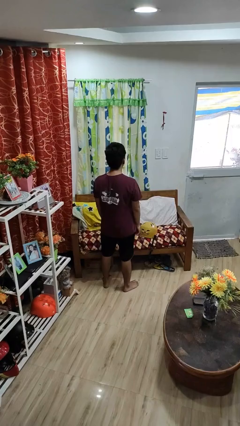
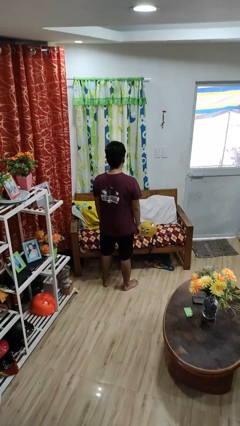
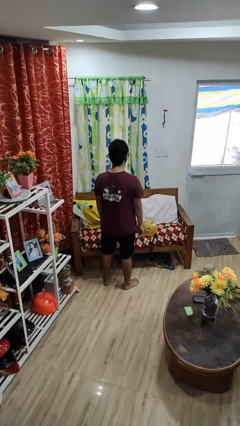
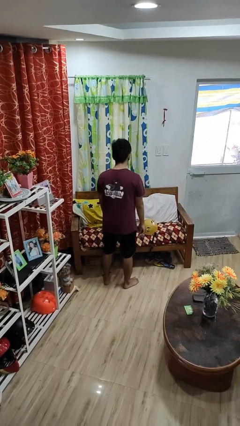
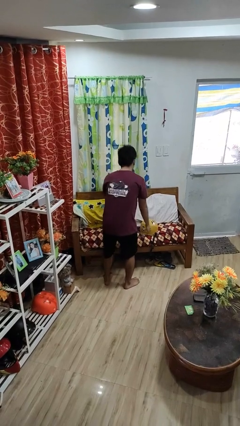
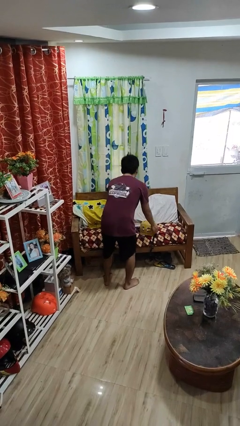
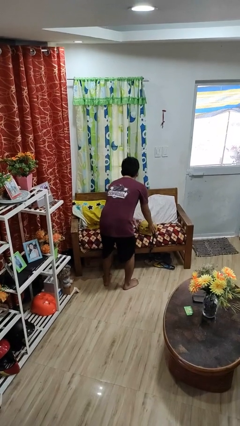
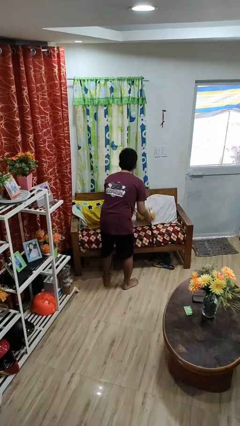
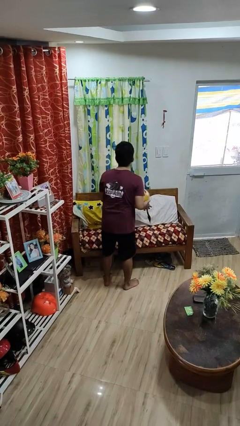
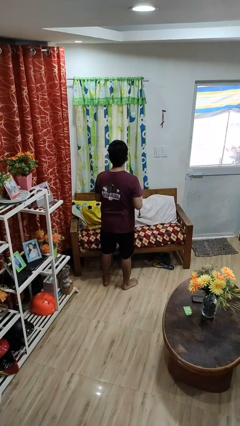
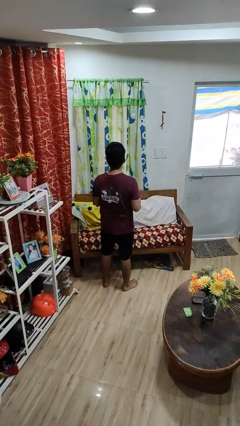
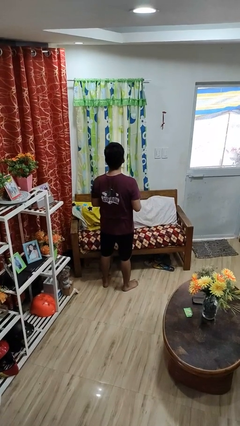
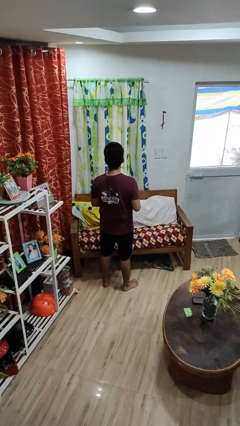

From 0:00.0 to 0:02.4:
person picks up object from couch

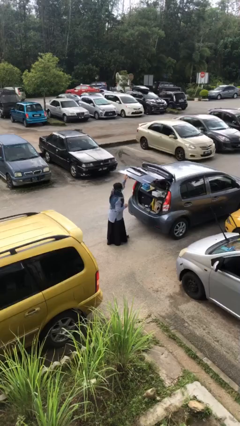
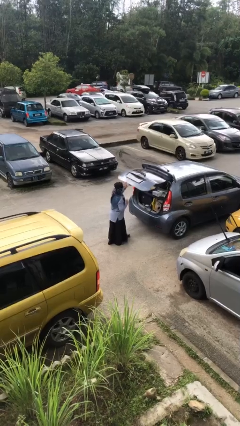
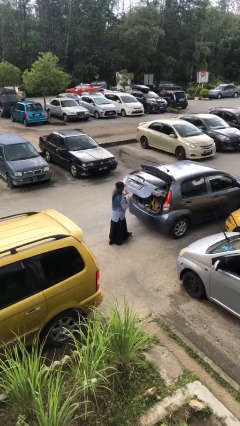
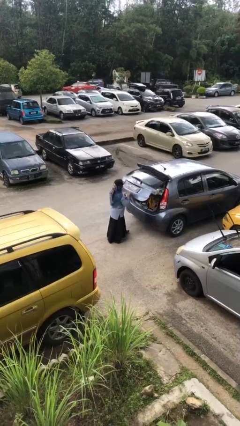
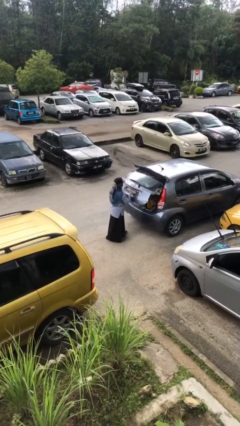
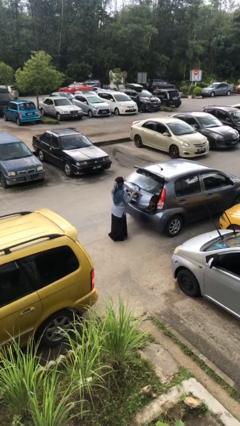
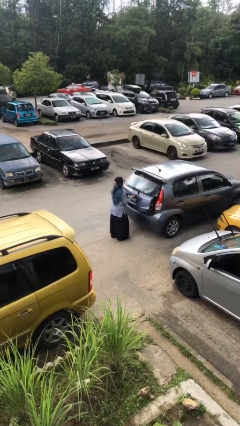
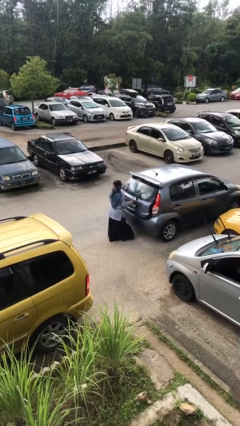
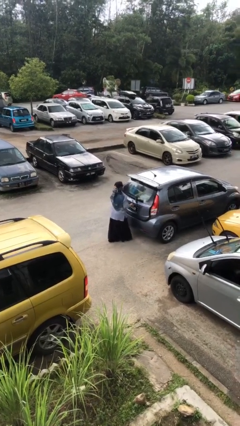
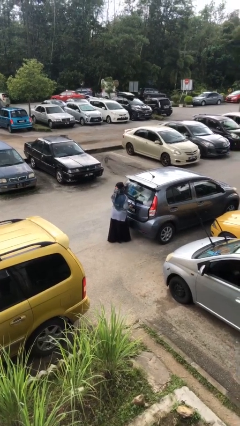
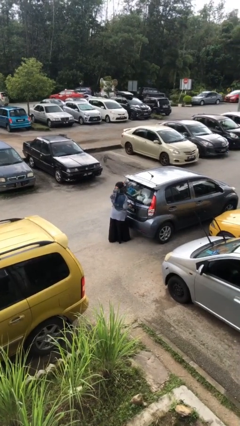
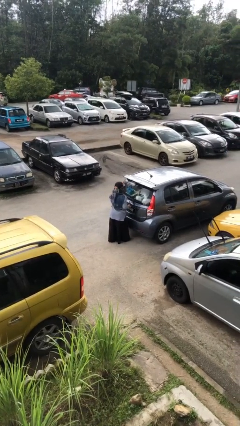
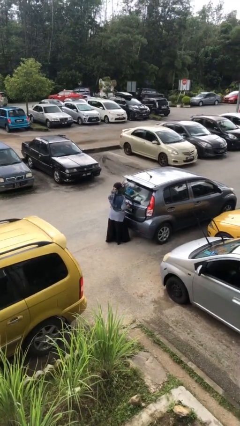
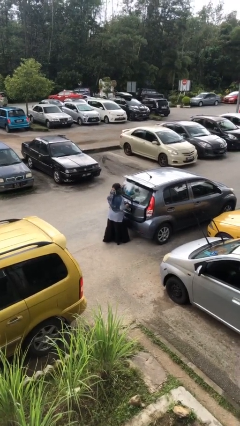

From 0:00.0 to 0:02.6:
person closes car trunk

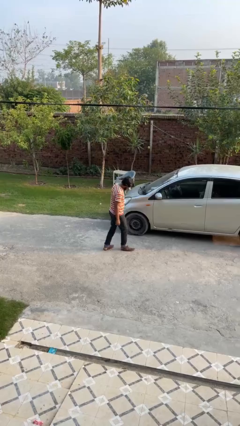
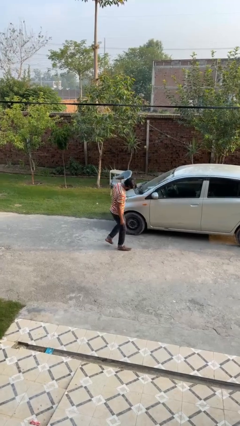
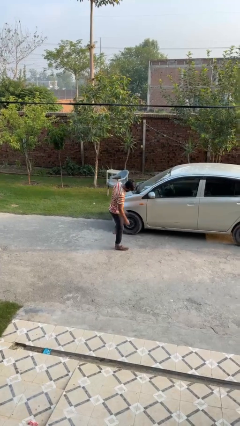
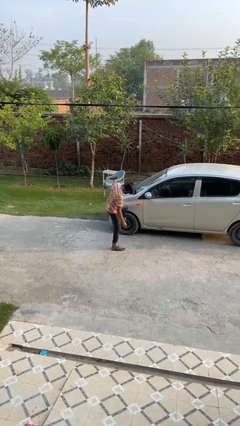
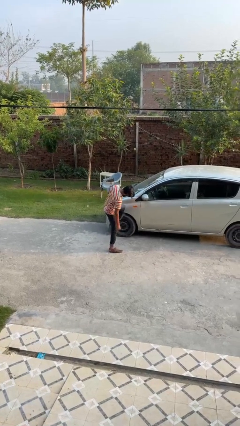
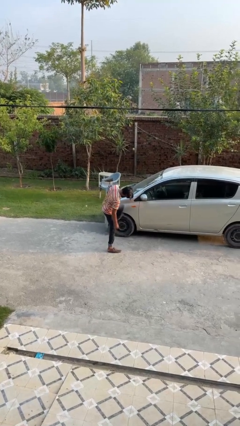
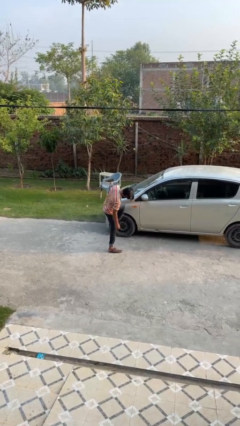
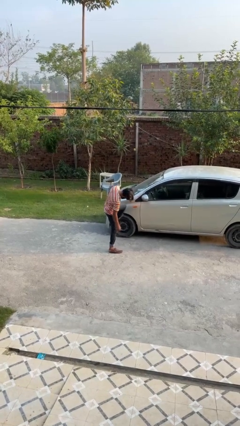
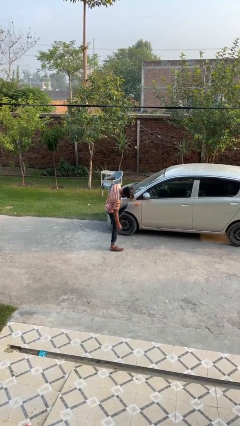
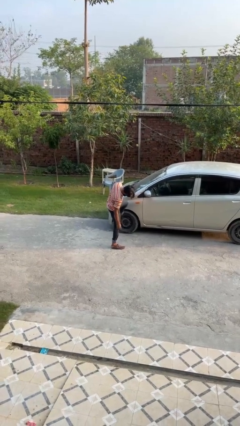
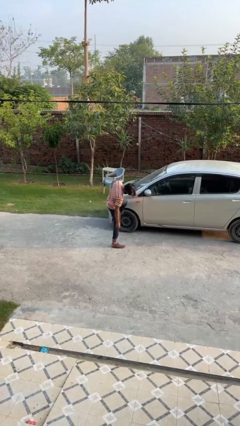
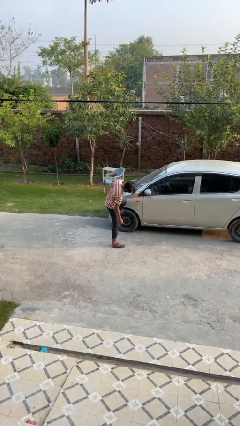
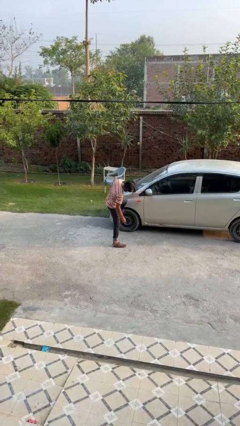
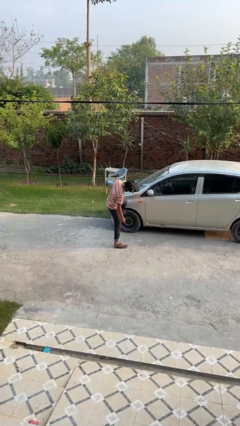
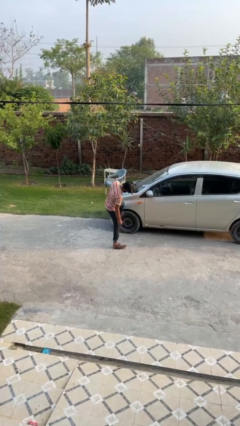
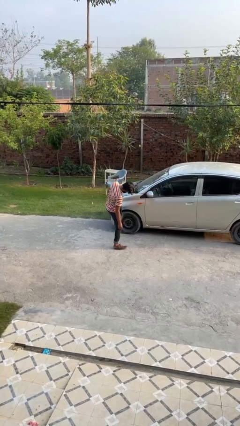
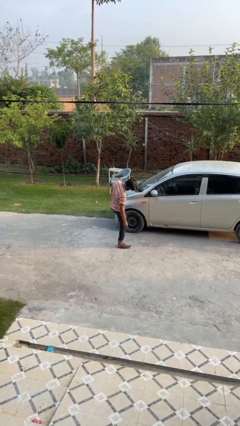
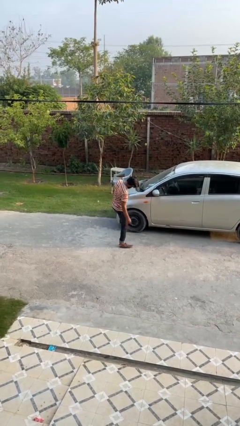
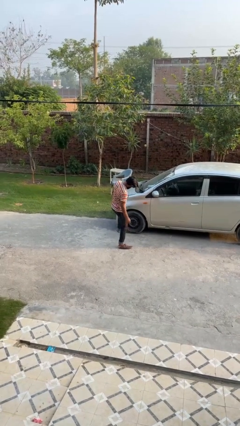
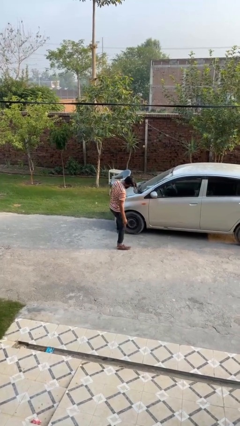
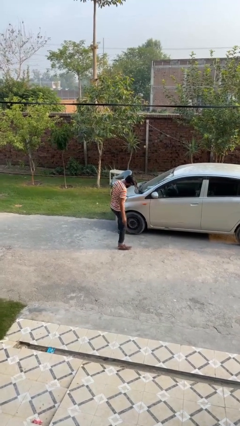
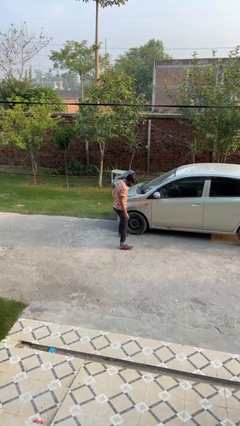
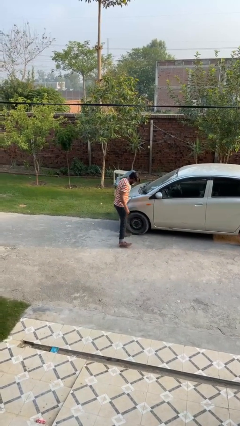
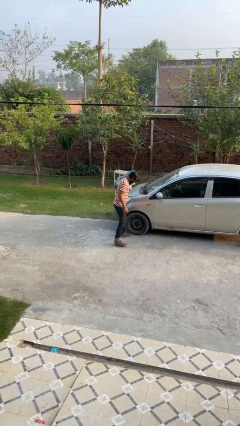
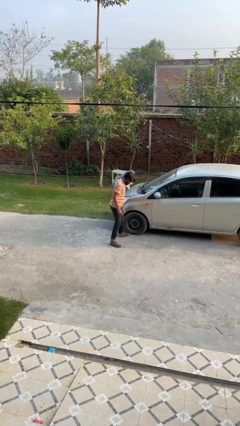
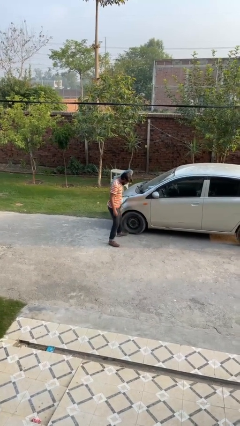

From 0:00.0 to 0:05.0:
person kicks car tires

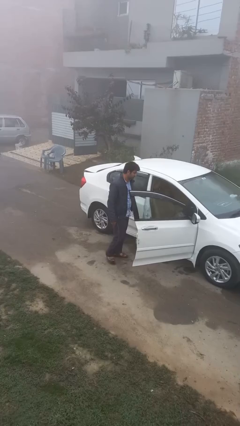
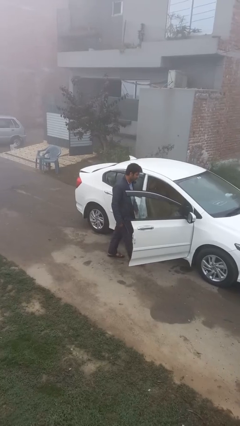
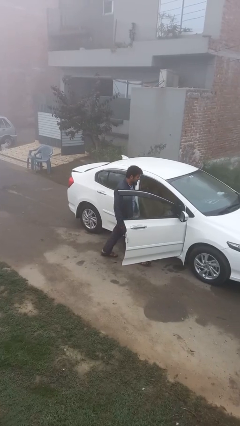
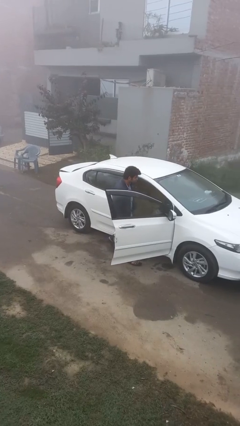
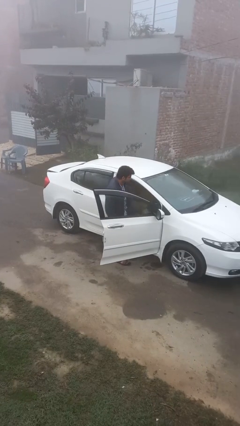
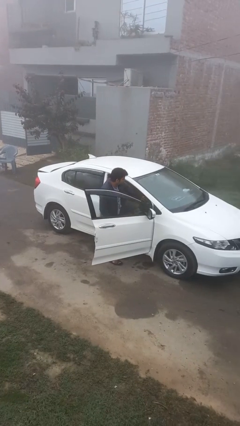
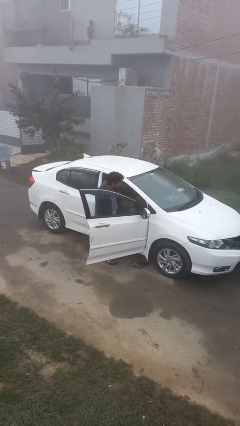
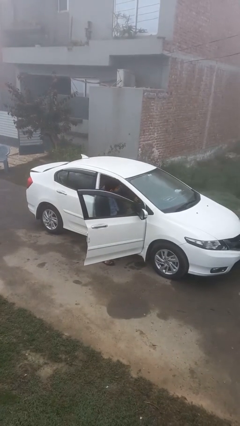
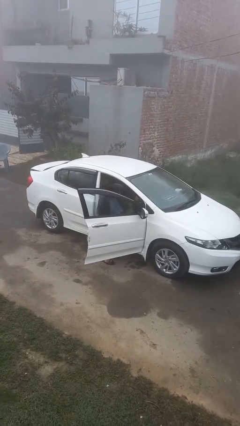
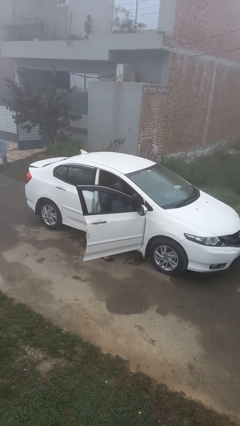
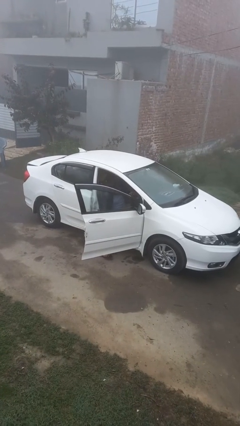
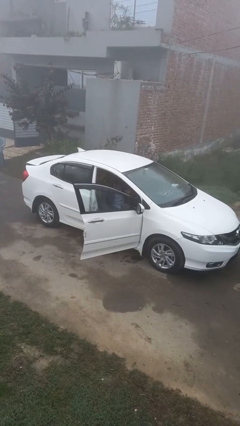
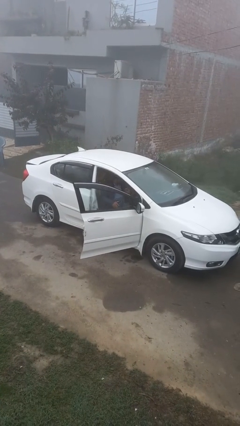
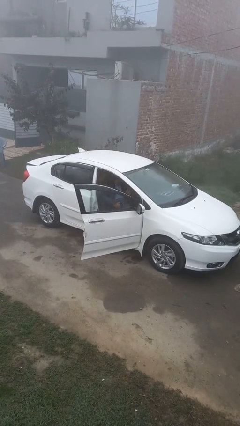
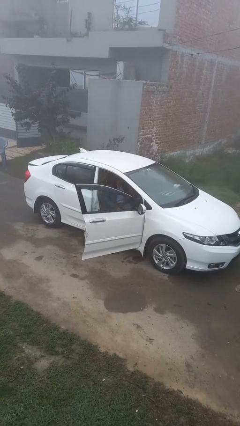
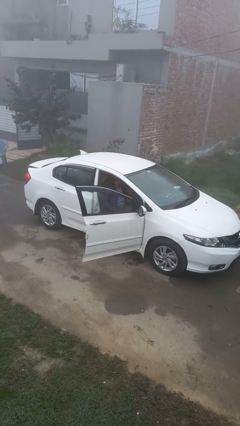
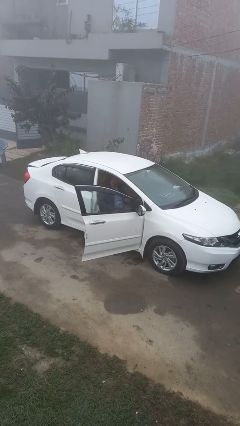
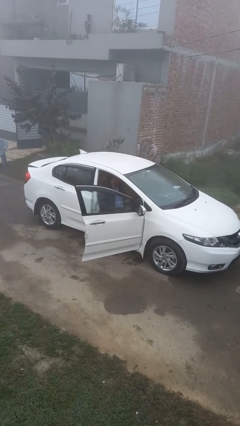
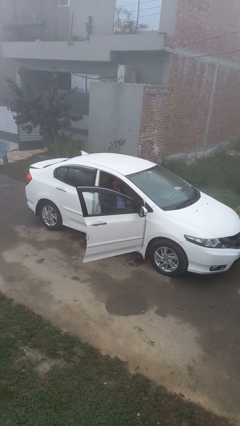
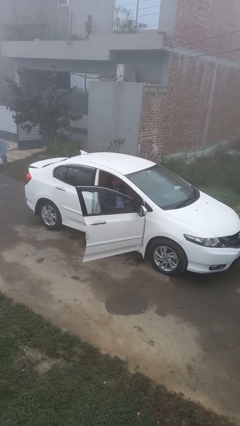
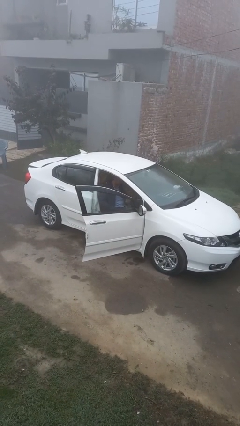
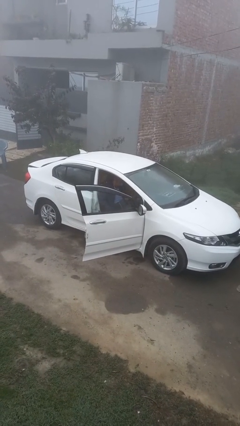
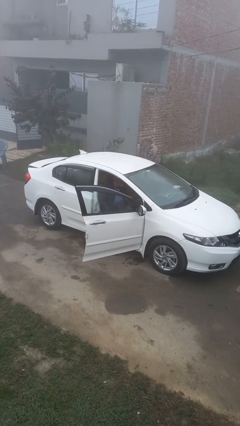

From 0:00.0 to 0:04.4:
person enters car

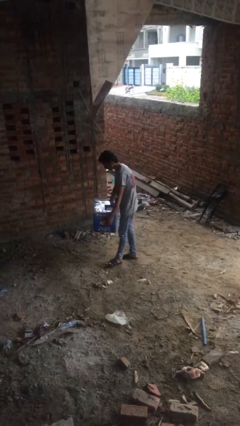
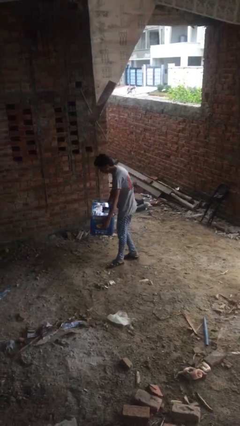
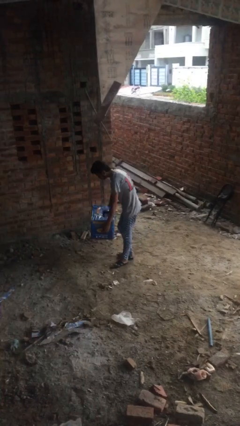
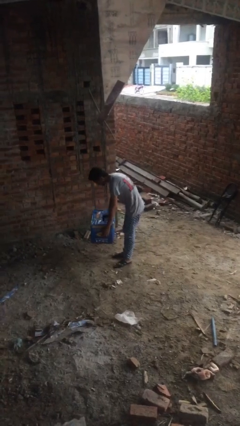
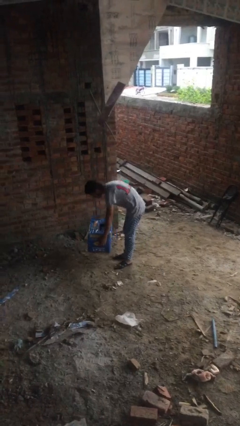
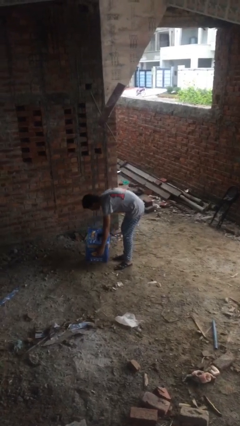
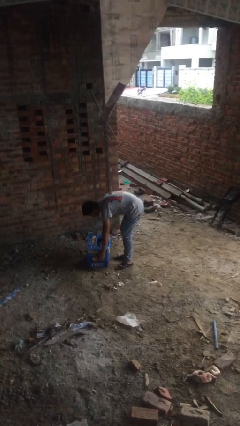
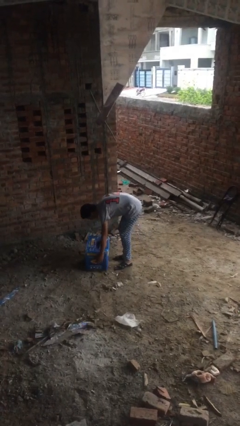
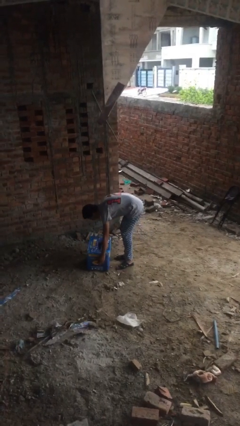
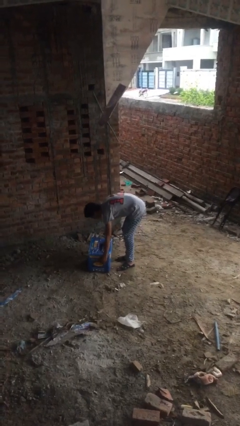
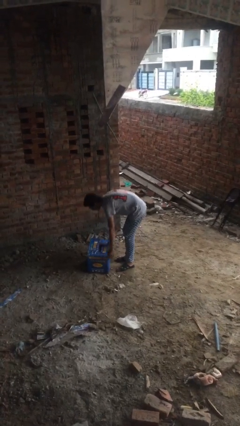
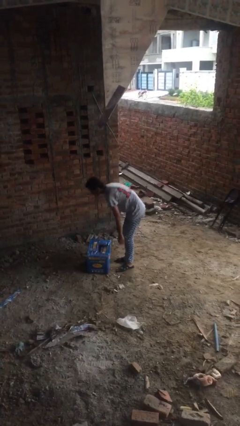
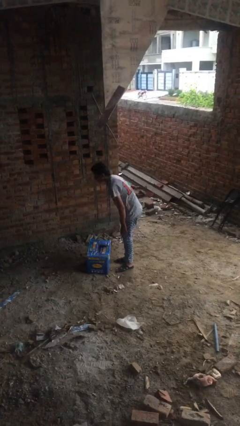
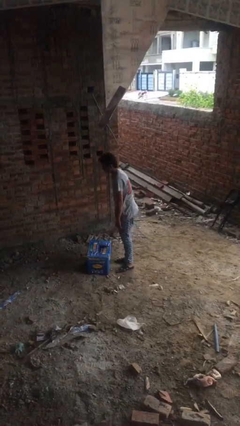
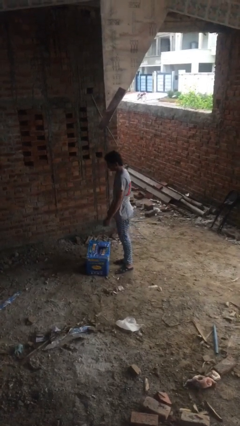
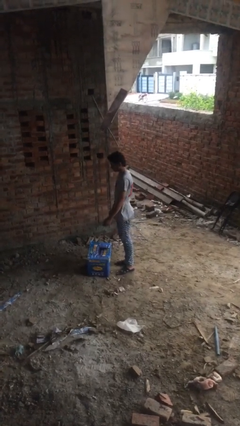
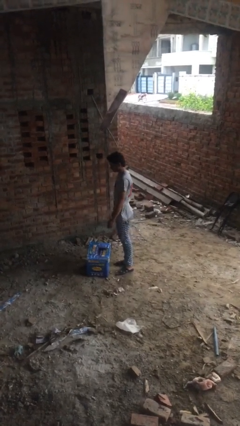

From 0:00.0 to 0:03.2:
person puts down object on floor
